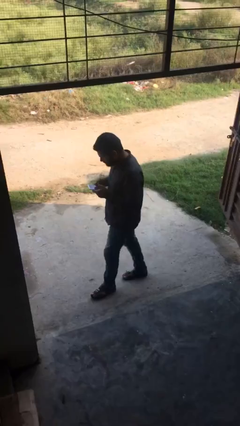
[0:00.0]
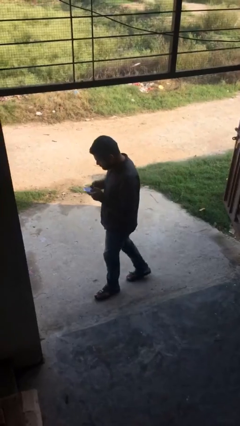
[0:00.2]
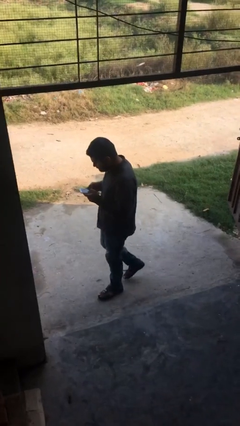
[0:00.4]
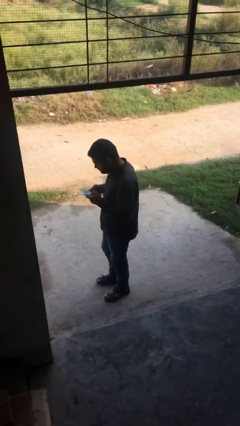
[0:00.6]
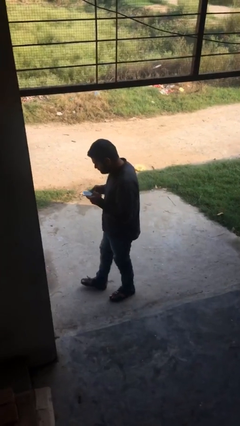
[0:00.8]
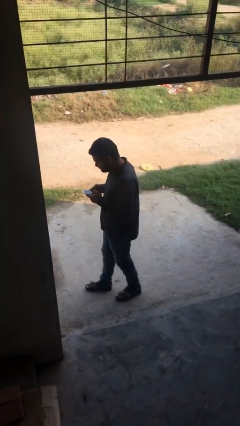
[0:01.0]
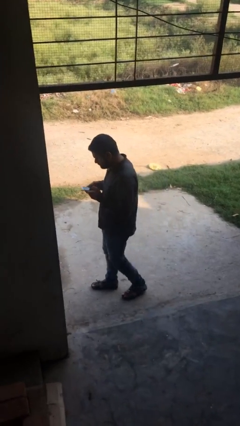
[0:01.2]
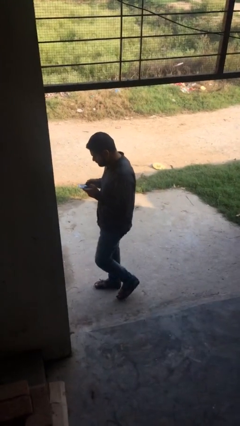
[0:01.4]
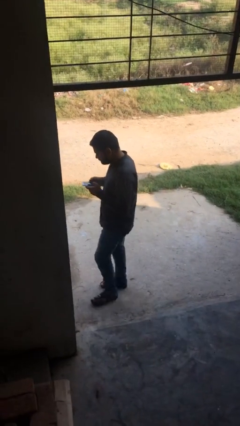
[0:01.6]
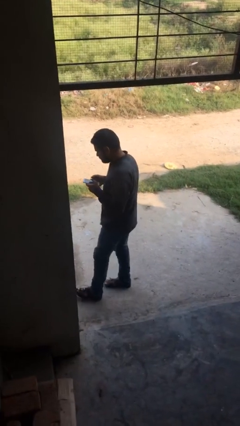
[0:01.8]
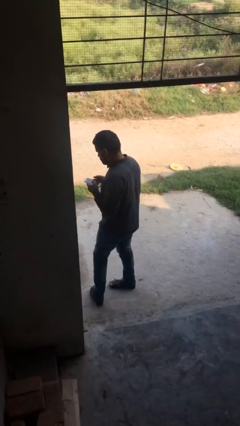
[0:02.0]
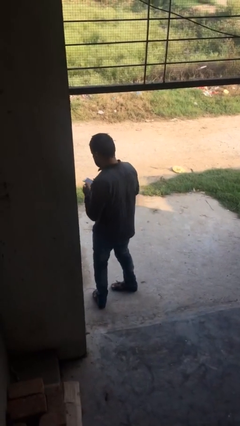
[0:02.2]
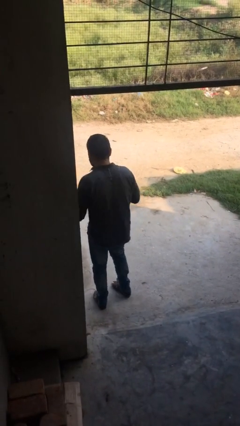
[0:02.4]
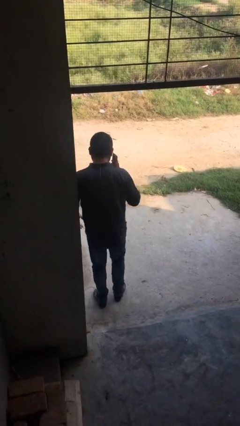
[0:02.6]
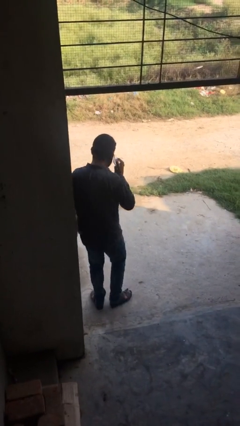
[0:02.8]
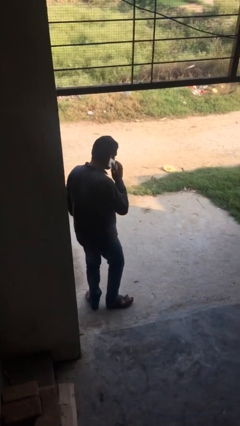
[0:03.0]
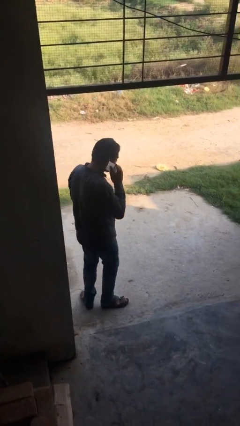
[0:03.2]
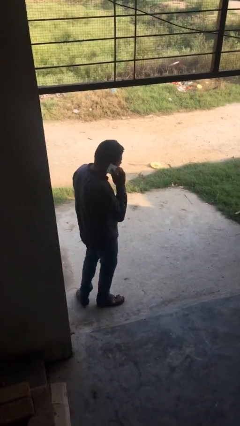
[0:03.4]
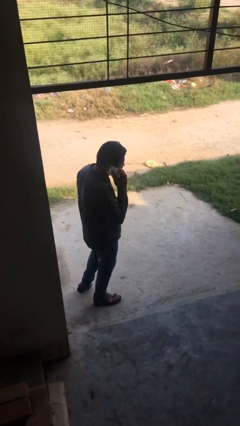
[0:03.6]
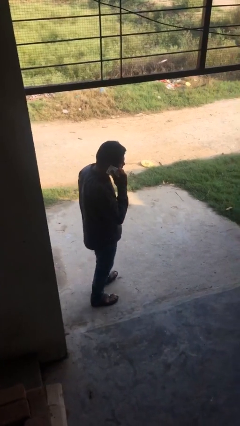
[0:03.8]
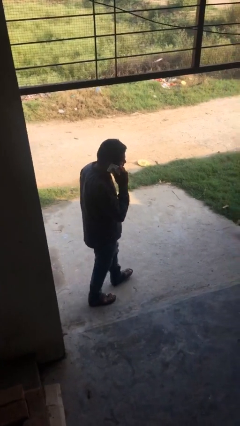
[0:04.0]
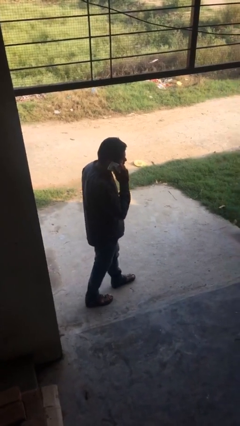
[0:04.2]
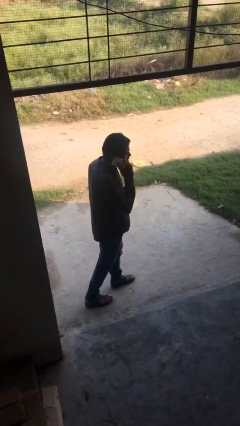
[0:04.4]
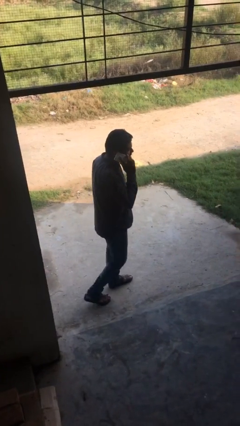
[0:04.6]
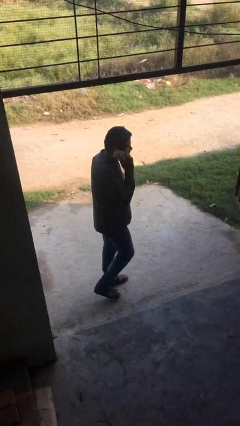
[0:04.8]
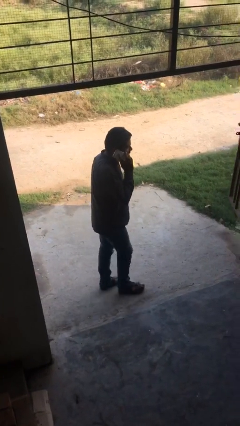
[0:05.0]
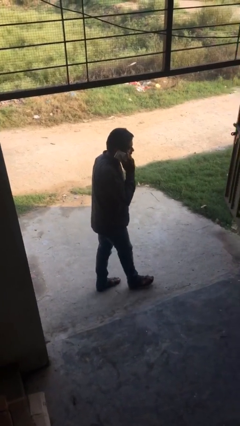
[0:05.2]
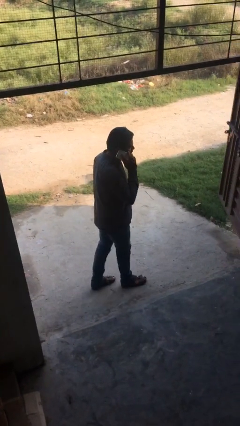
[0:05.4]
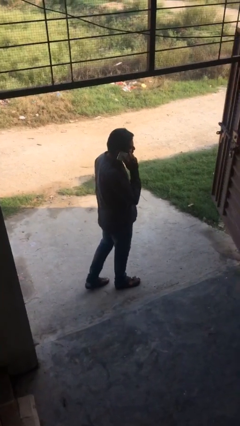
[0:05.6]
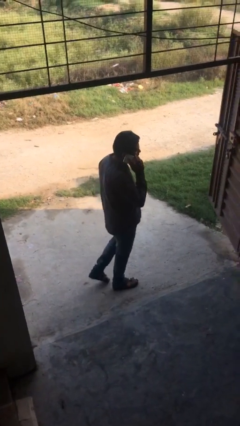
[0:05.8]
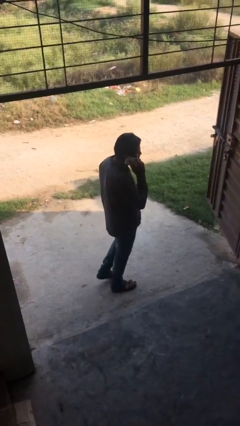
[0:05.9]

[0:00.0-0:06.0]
person talks on phone

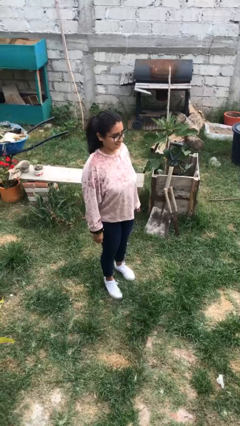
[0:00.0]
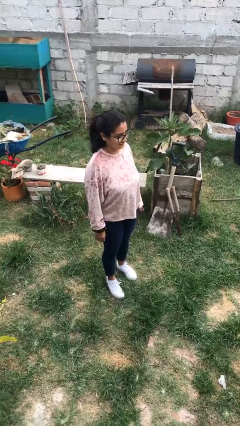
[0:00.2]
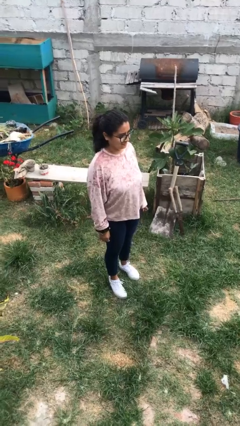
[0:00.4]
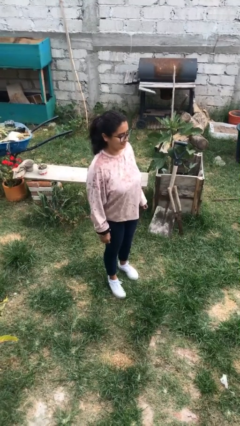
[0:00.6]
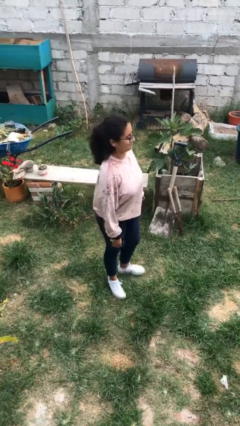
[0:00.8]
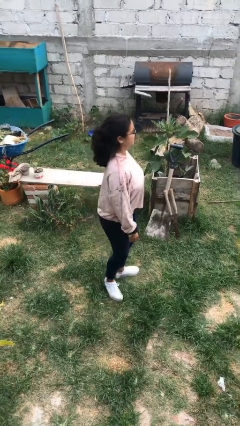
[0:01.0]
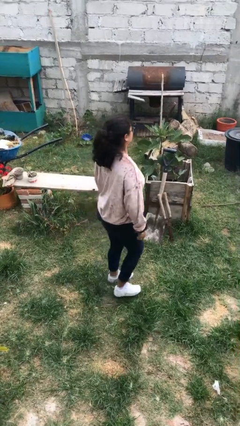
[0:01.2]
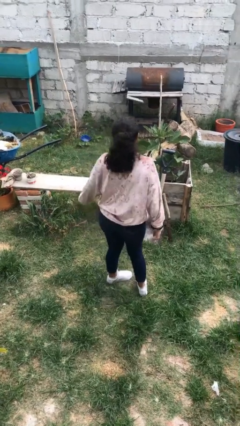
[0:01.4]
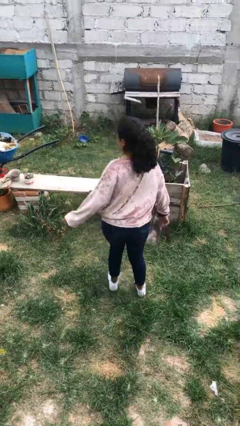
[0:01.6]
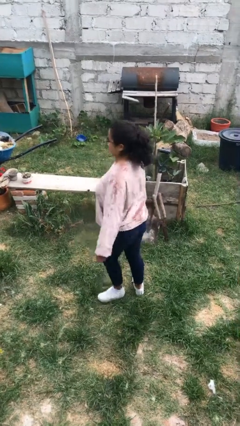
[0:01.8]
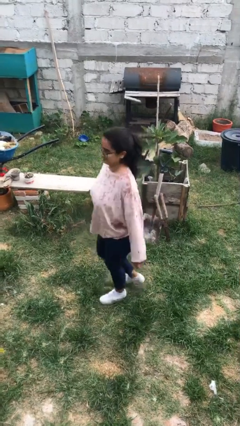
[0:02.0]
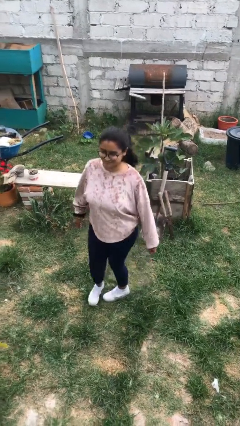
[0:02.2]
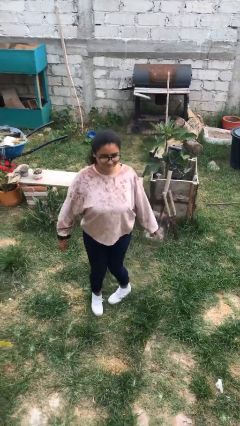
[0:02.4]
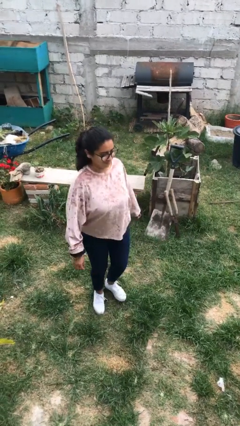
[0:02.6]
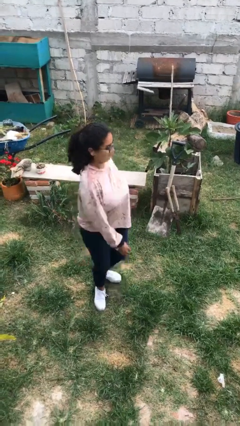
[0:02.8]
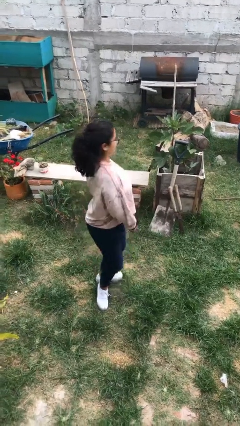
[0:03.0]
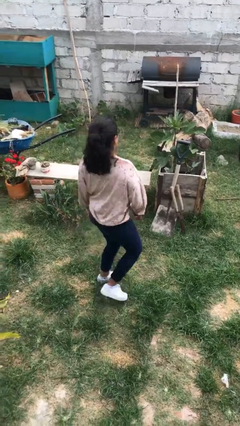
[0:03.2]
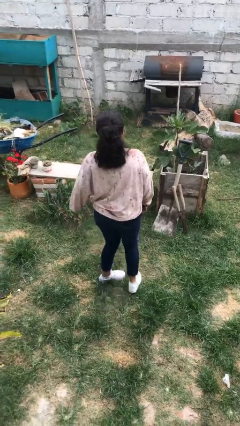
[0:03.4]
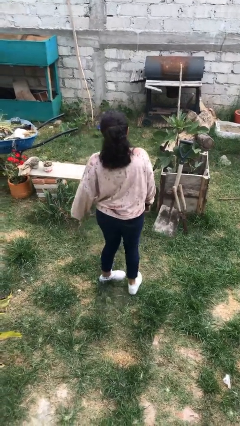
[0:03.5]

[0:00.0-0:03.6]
person twirls

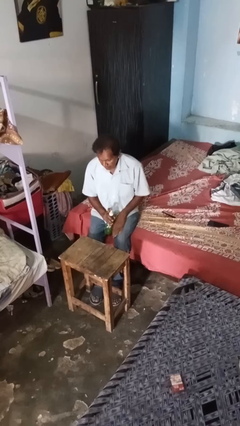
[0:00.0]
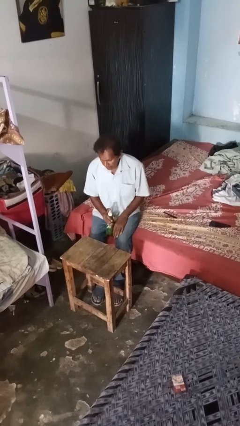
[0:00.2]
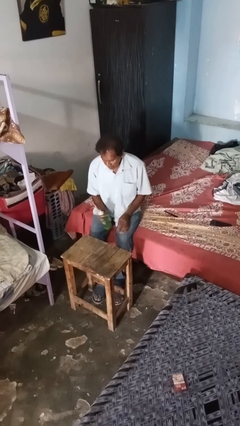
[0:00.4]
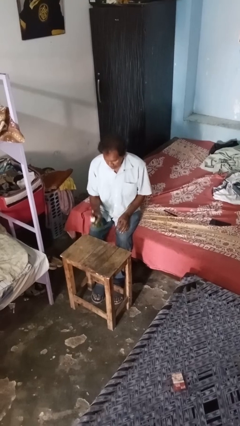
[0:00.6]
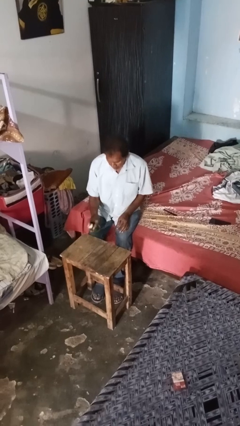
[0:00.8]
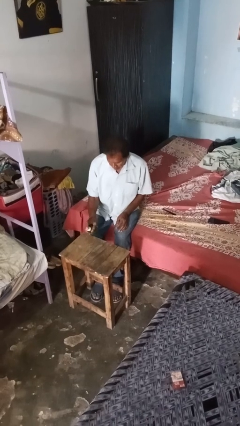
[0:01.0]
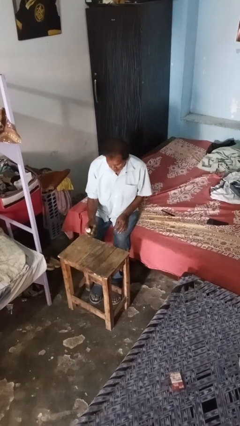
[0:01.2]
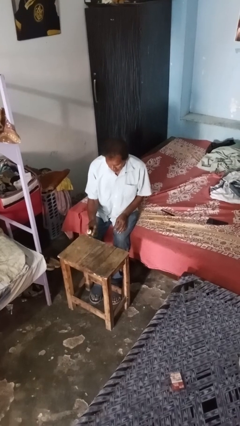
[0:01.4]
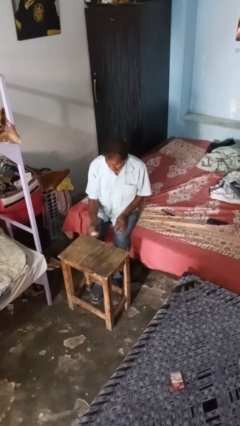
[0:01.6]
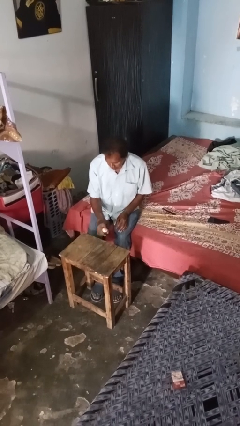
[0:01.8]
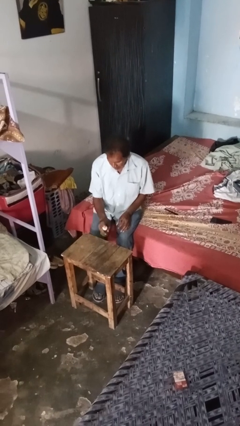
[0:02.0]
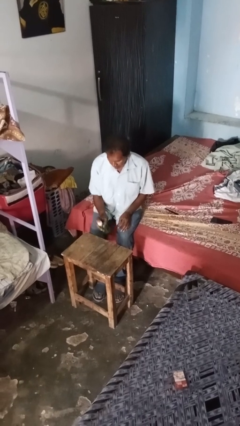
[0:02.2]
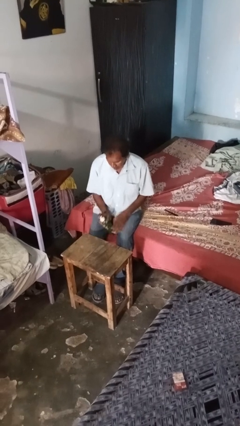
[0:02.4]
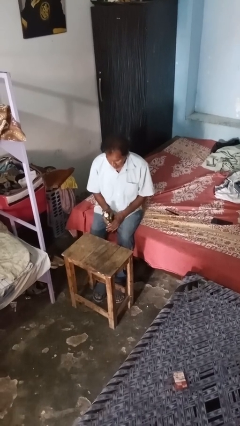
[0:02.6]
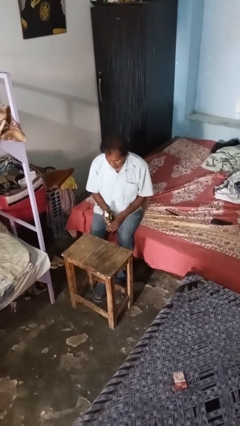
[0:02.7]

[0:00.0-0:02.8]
person sprays from bottle

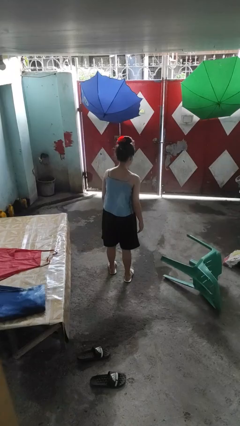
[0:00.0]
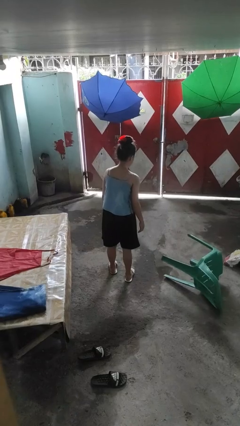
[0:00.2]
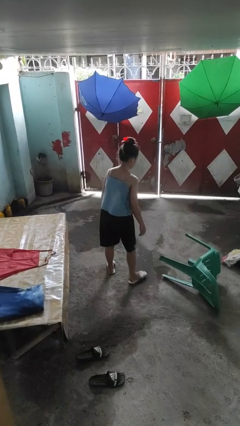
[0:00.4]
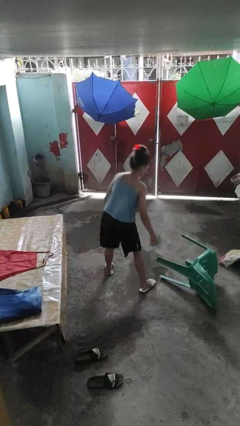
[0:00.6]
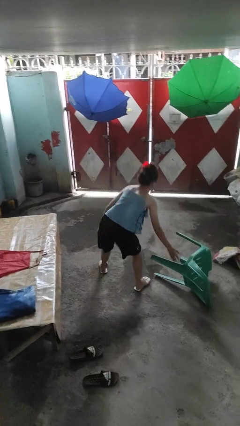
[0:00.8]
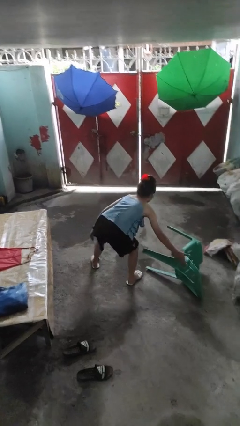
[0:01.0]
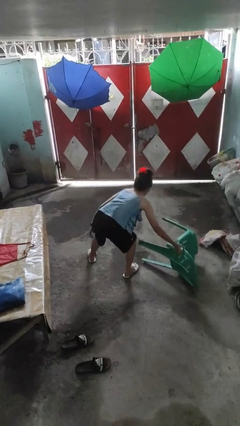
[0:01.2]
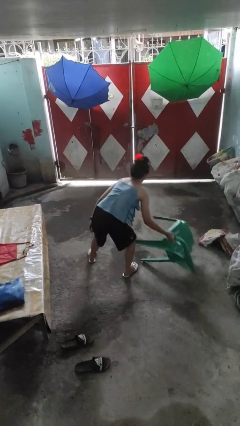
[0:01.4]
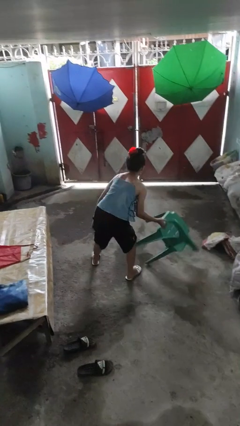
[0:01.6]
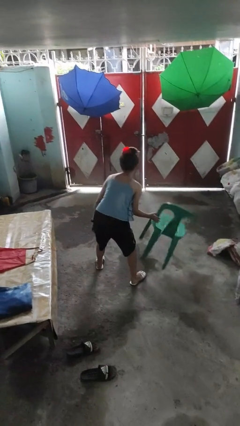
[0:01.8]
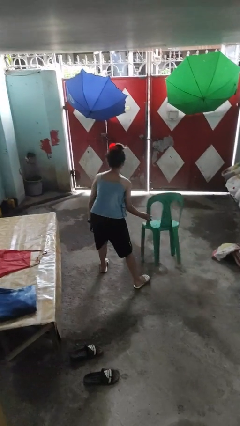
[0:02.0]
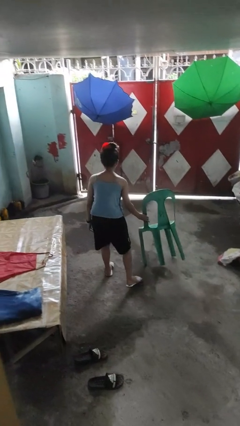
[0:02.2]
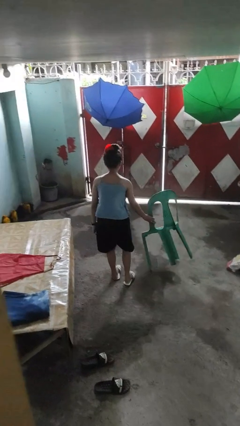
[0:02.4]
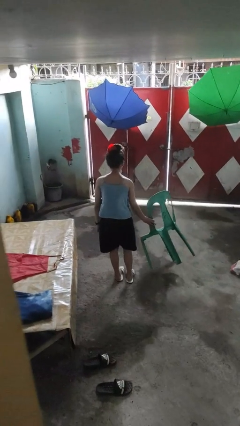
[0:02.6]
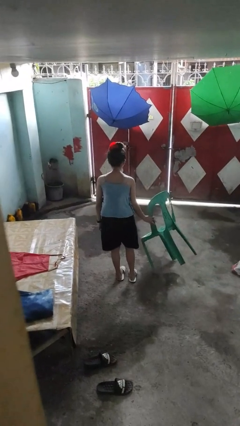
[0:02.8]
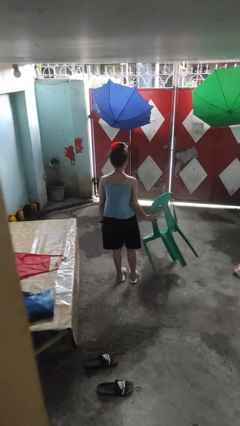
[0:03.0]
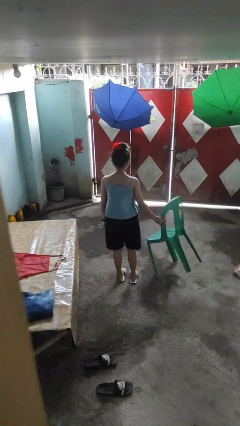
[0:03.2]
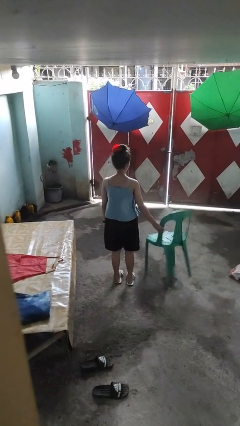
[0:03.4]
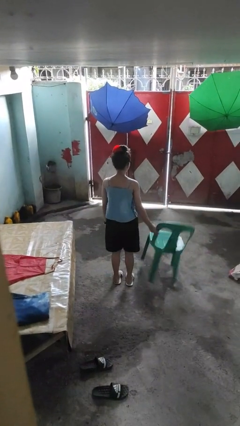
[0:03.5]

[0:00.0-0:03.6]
person sets upright furniture

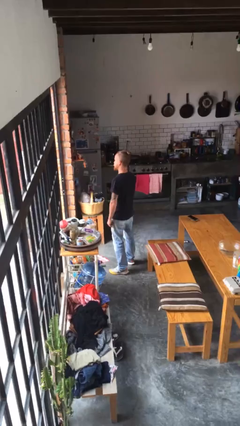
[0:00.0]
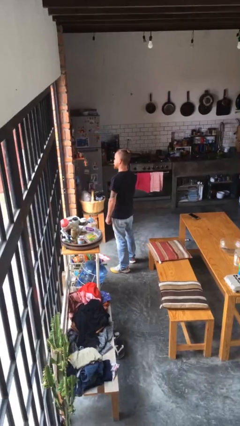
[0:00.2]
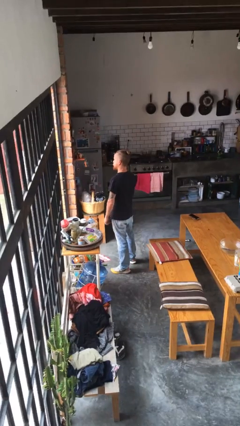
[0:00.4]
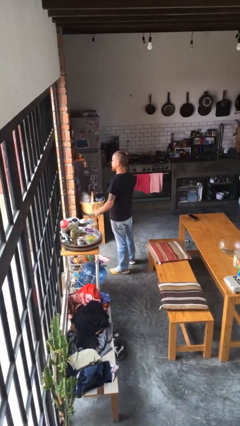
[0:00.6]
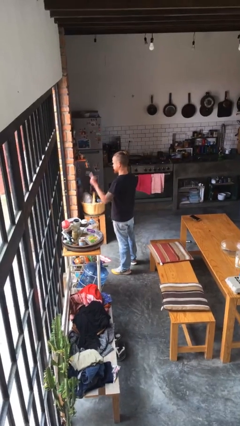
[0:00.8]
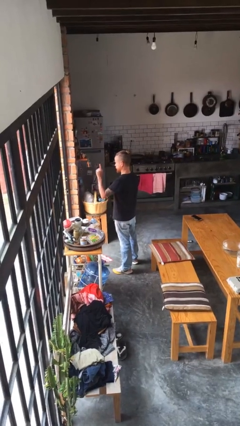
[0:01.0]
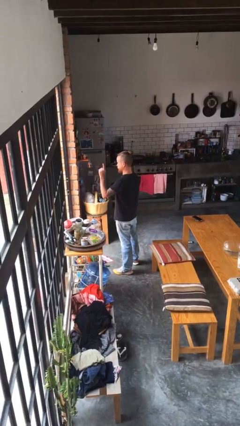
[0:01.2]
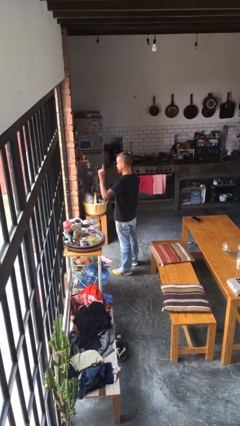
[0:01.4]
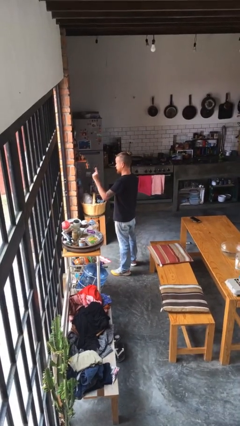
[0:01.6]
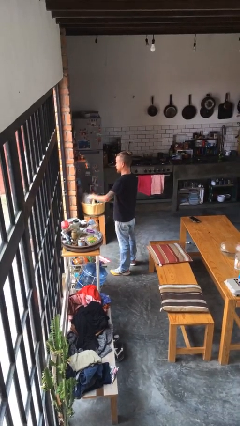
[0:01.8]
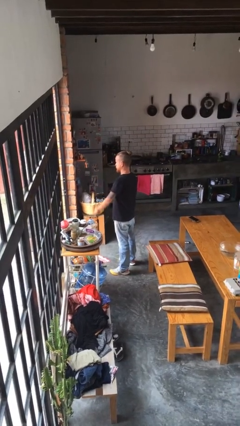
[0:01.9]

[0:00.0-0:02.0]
person gestures number one
